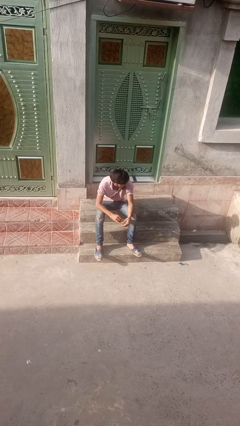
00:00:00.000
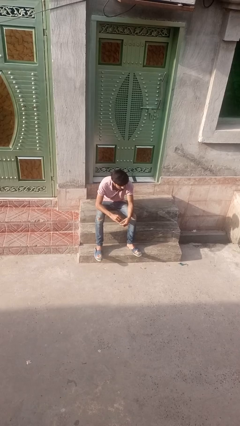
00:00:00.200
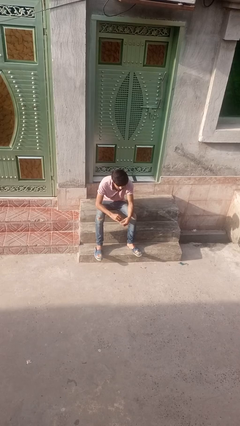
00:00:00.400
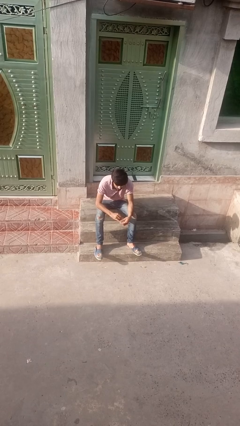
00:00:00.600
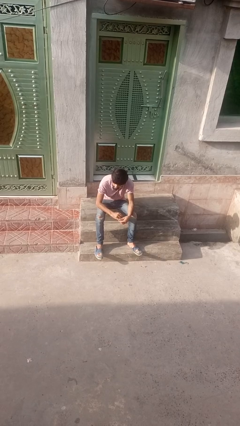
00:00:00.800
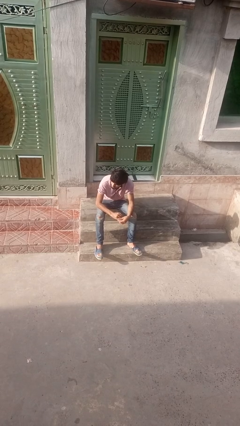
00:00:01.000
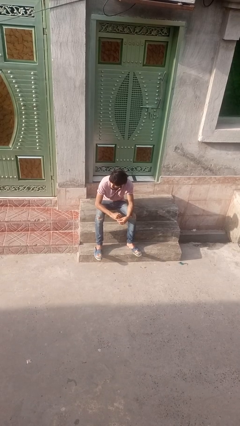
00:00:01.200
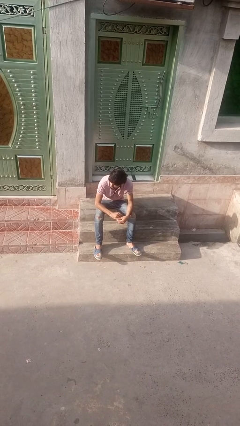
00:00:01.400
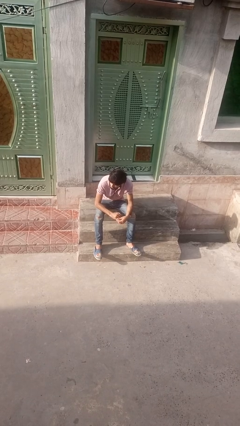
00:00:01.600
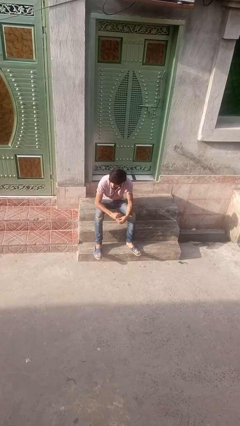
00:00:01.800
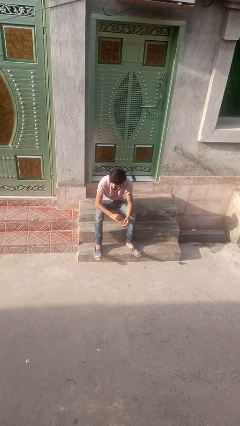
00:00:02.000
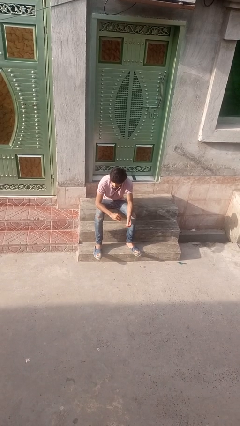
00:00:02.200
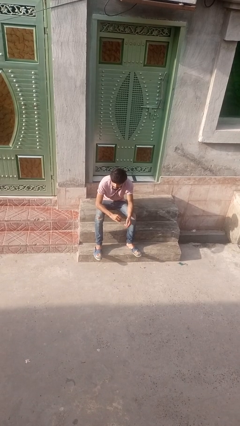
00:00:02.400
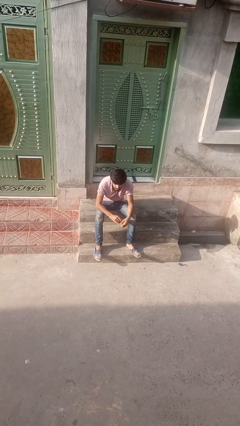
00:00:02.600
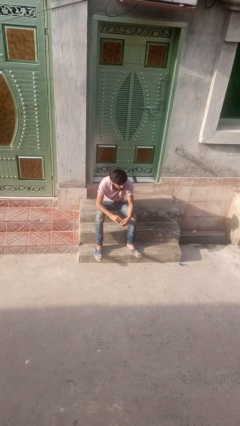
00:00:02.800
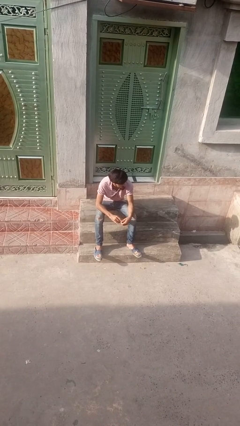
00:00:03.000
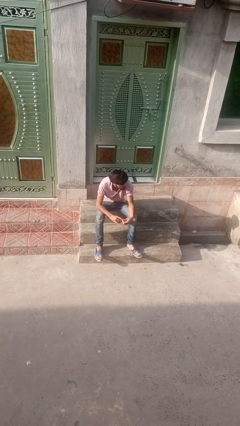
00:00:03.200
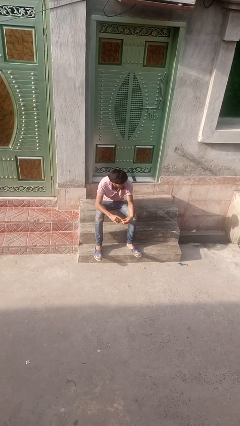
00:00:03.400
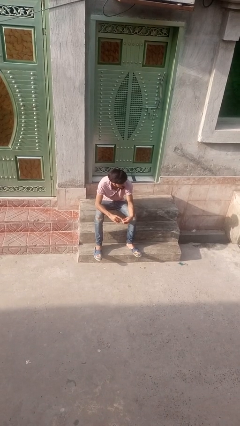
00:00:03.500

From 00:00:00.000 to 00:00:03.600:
person puts on ring

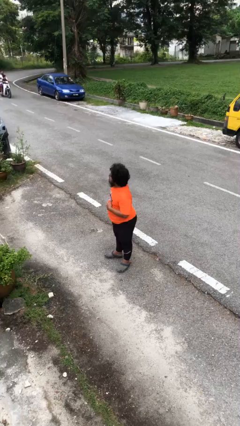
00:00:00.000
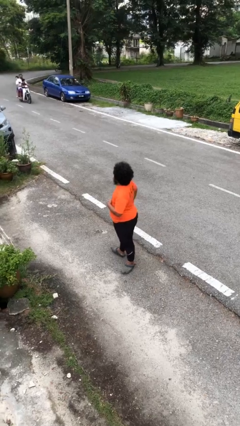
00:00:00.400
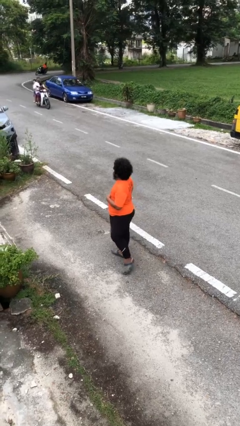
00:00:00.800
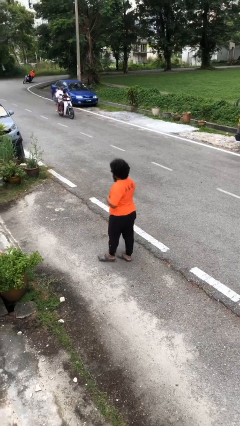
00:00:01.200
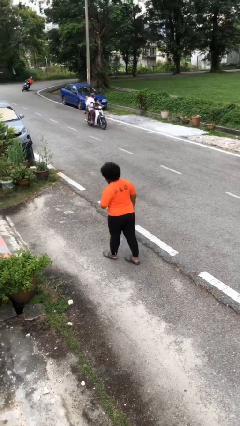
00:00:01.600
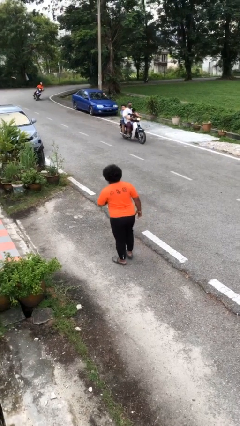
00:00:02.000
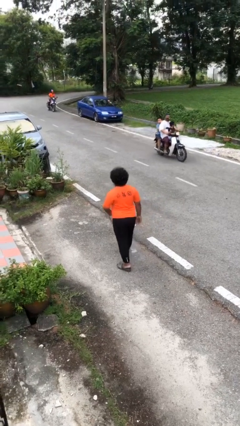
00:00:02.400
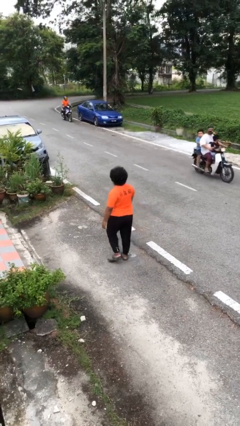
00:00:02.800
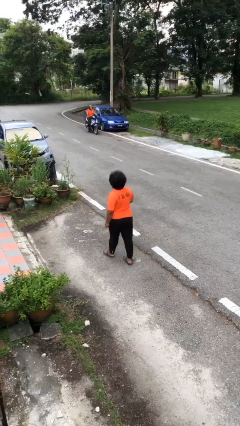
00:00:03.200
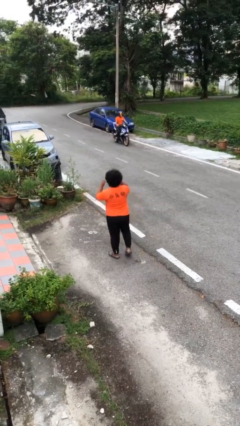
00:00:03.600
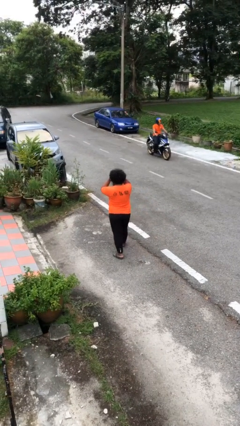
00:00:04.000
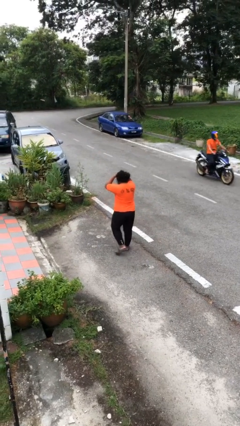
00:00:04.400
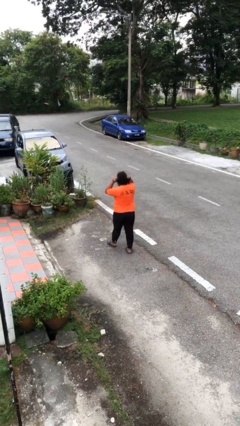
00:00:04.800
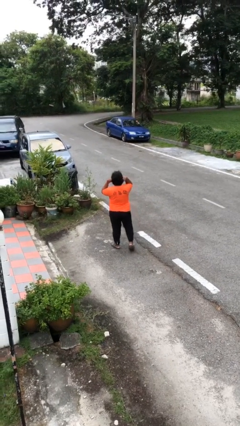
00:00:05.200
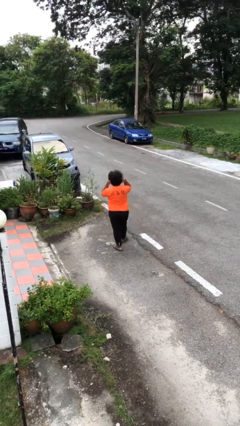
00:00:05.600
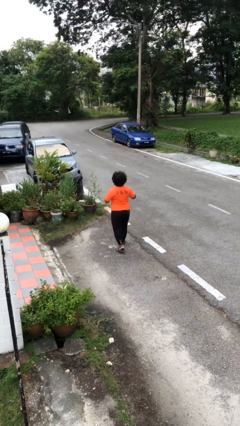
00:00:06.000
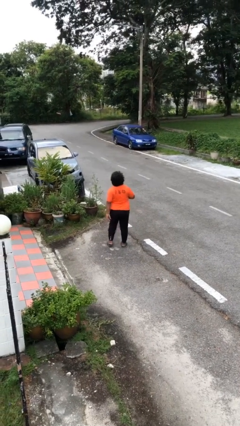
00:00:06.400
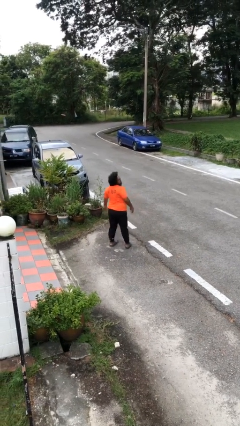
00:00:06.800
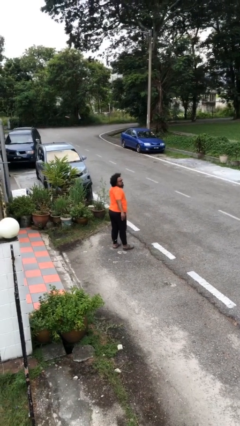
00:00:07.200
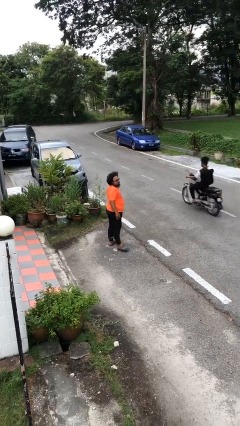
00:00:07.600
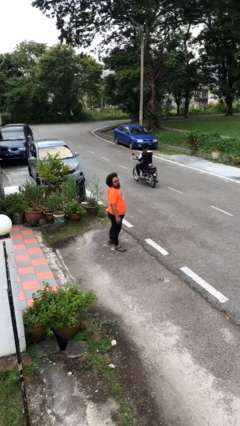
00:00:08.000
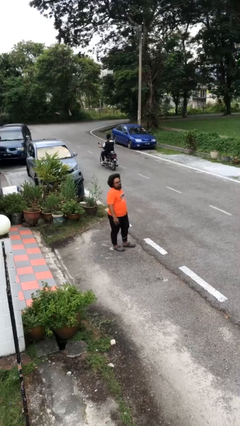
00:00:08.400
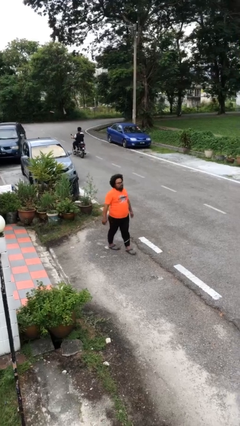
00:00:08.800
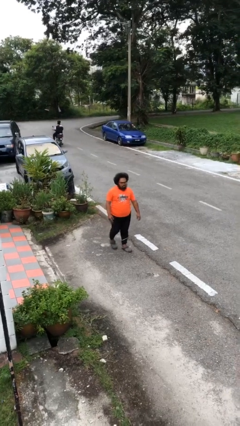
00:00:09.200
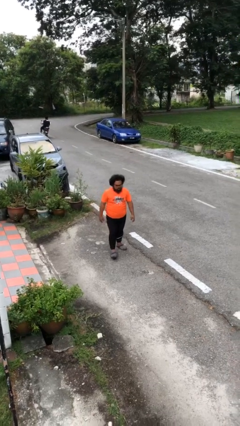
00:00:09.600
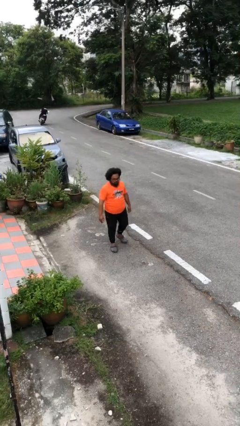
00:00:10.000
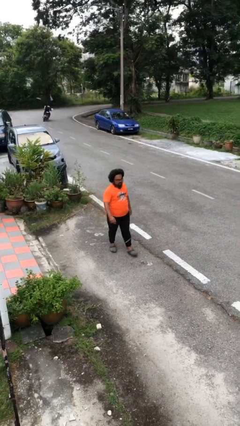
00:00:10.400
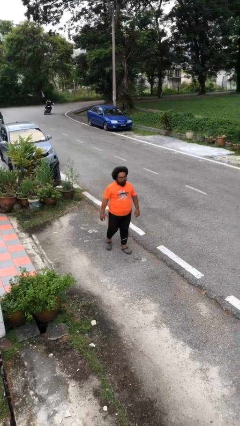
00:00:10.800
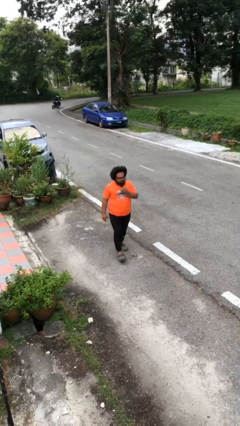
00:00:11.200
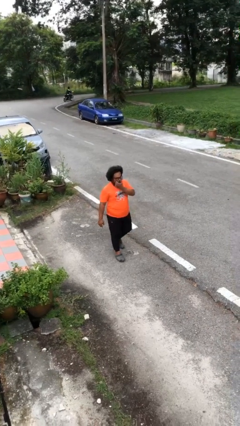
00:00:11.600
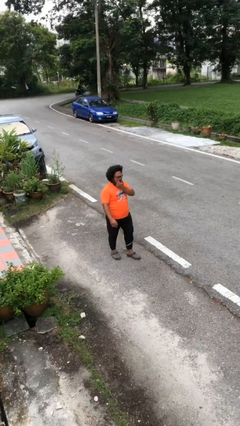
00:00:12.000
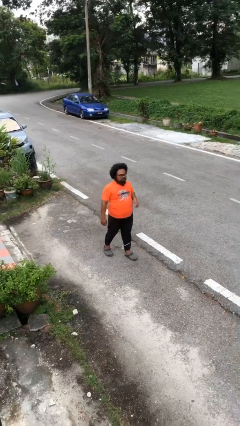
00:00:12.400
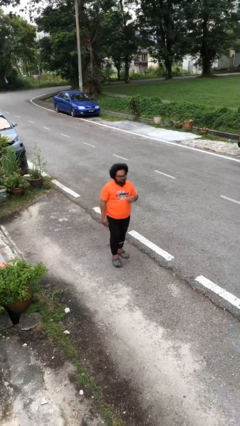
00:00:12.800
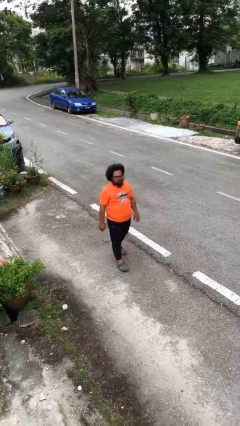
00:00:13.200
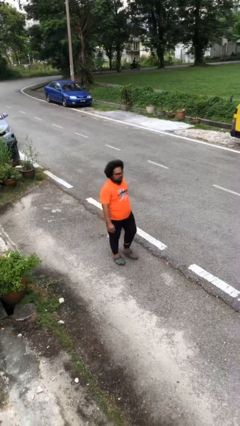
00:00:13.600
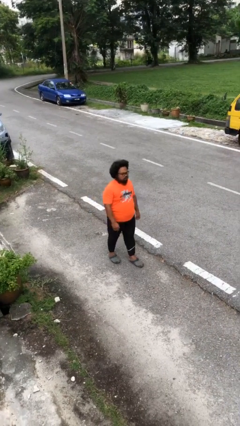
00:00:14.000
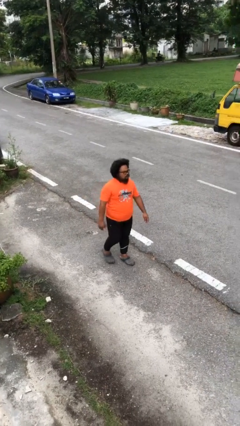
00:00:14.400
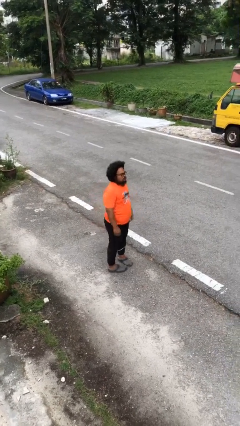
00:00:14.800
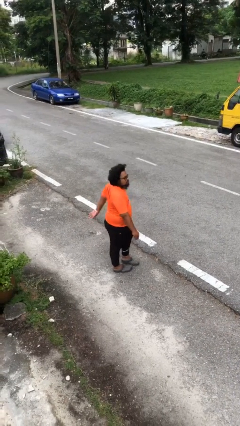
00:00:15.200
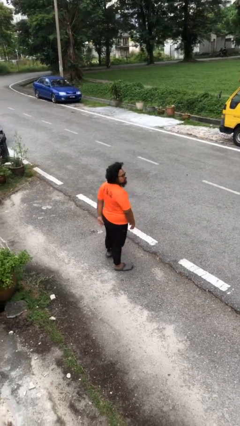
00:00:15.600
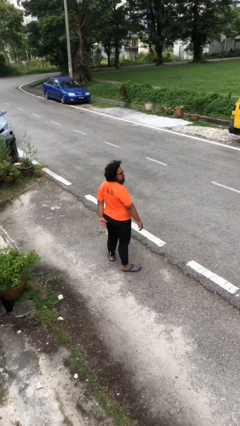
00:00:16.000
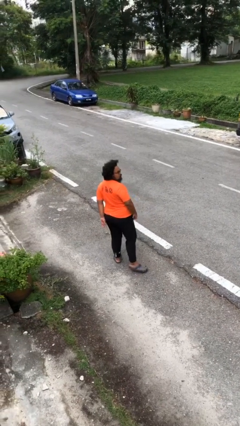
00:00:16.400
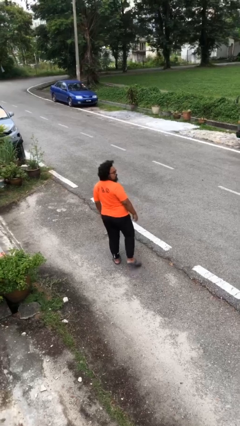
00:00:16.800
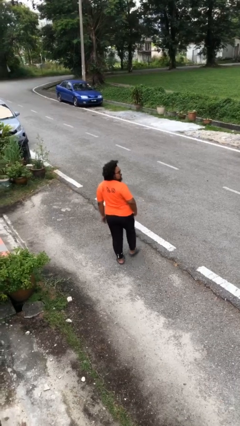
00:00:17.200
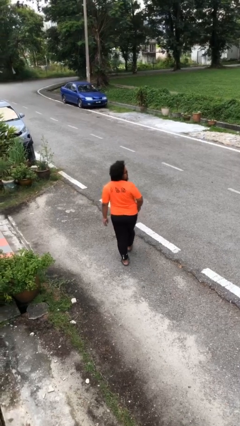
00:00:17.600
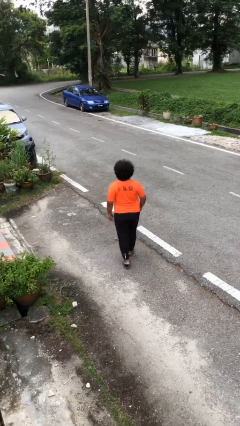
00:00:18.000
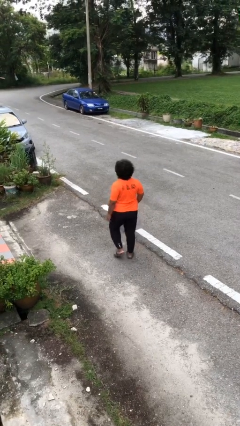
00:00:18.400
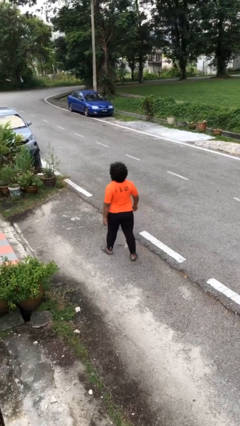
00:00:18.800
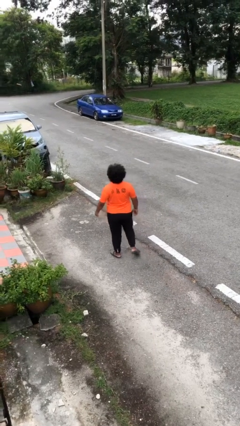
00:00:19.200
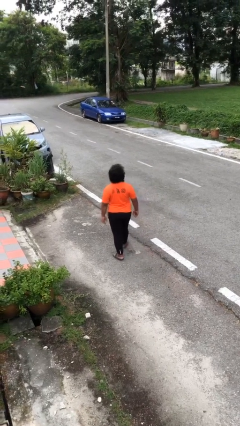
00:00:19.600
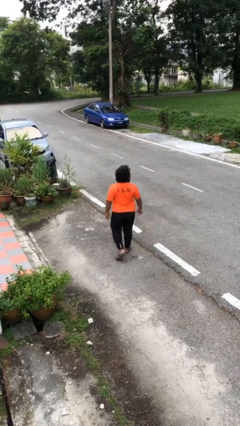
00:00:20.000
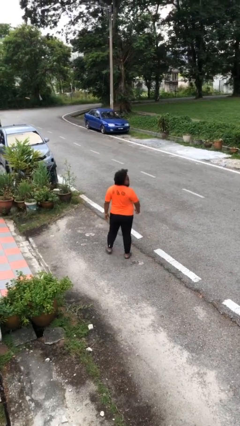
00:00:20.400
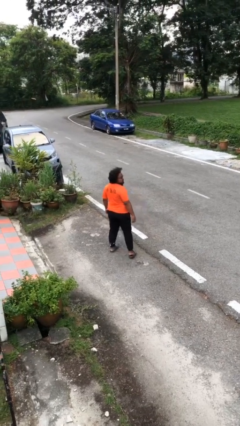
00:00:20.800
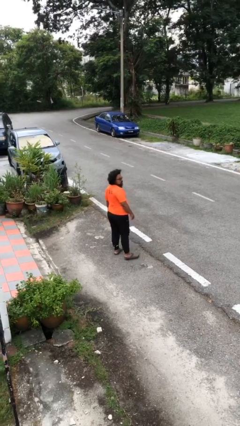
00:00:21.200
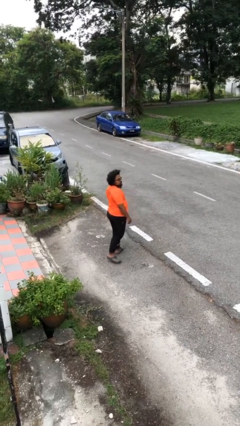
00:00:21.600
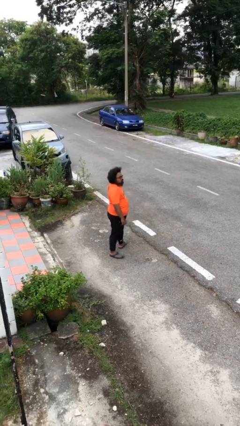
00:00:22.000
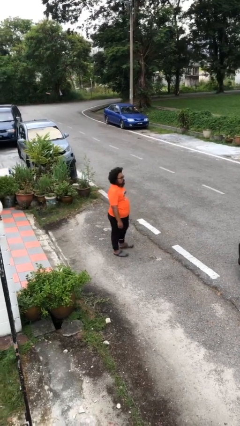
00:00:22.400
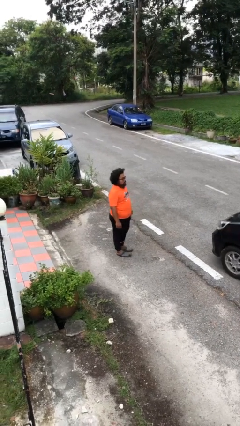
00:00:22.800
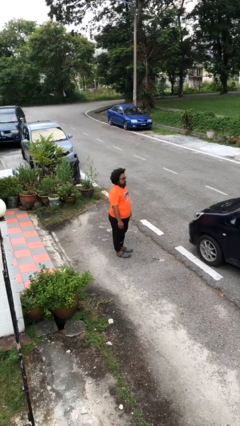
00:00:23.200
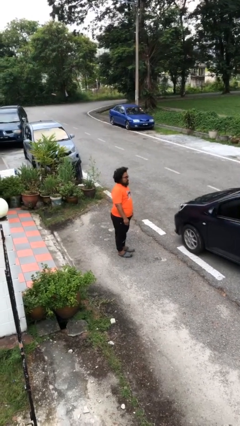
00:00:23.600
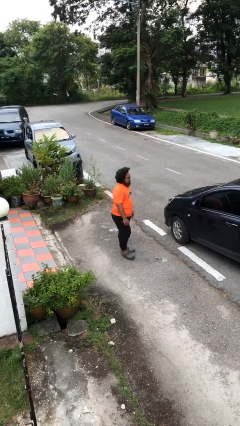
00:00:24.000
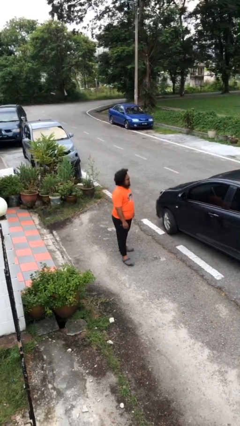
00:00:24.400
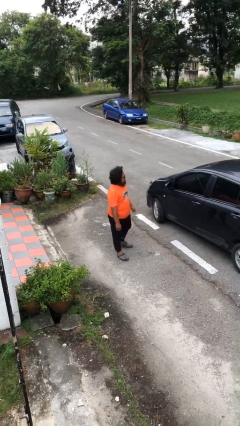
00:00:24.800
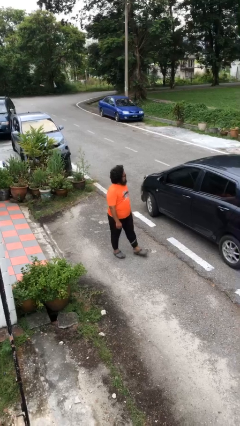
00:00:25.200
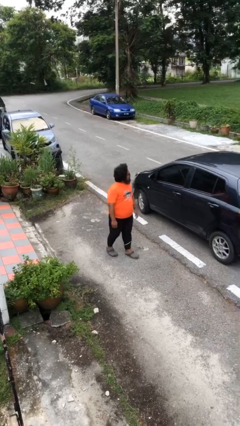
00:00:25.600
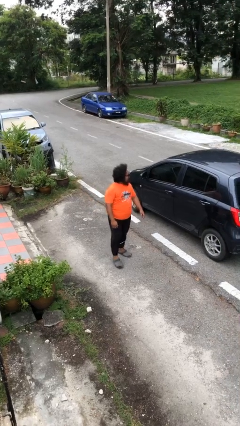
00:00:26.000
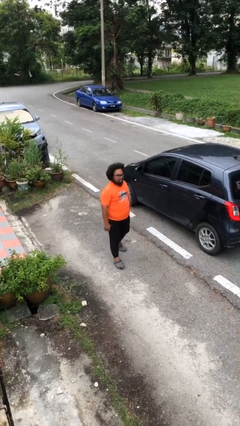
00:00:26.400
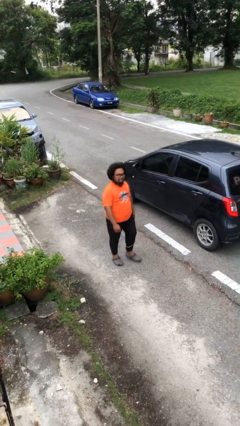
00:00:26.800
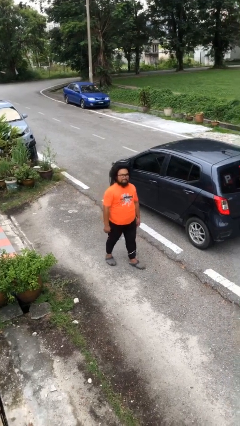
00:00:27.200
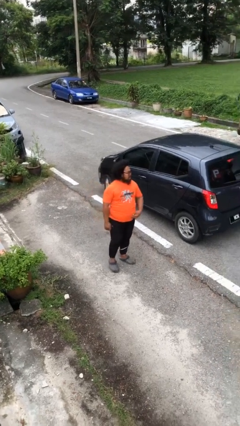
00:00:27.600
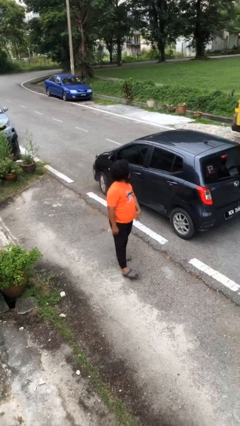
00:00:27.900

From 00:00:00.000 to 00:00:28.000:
person walks

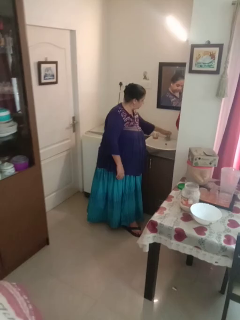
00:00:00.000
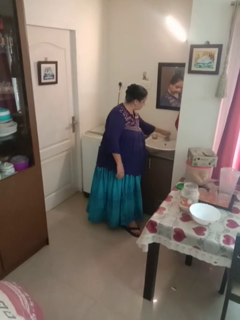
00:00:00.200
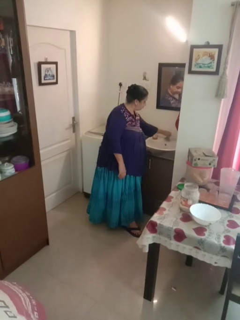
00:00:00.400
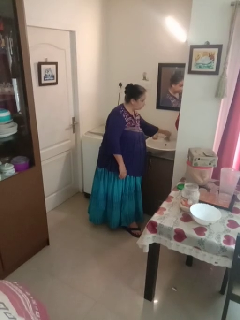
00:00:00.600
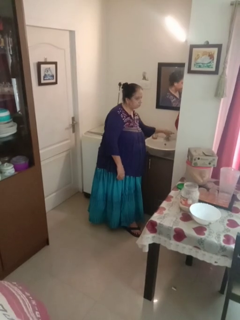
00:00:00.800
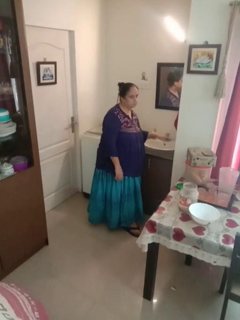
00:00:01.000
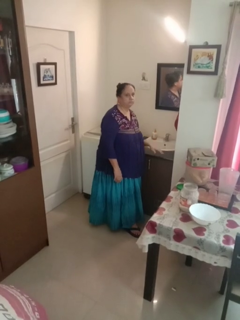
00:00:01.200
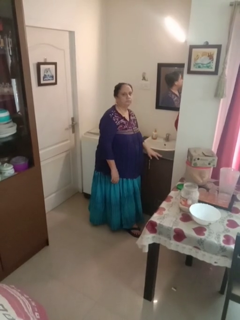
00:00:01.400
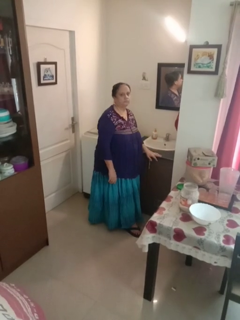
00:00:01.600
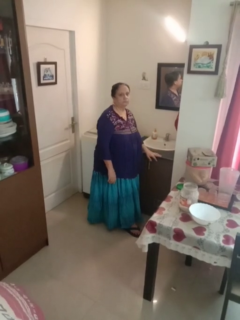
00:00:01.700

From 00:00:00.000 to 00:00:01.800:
person turns on faucet
